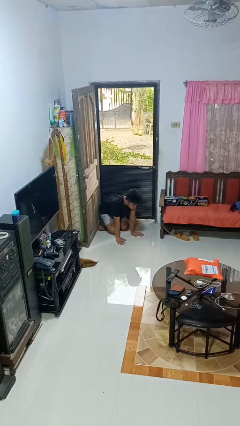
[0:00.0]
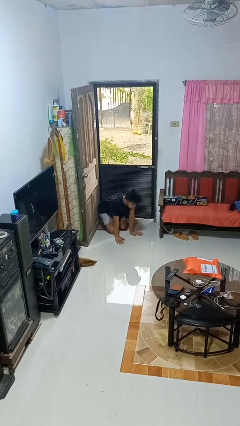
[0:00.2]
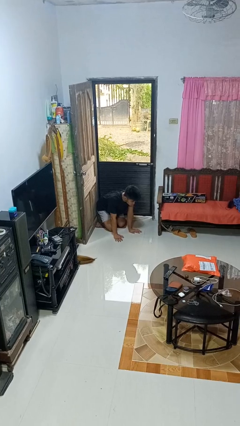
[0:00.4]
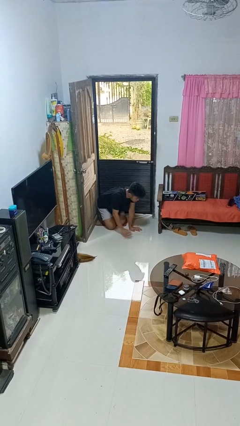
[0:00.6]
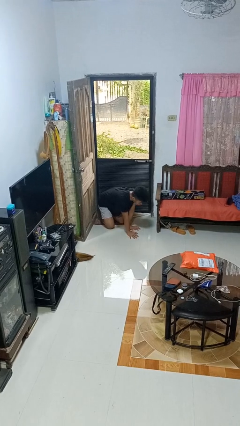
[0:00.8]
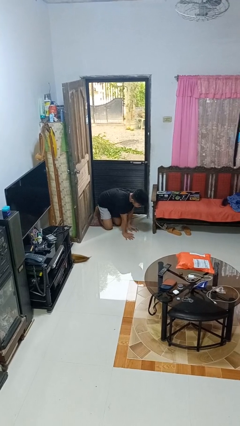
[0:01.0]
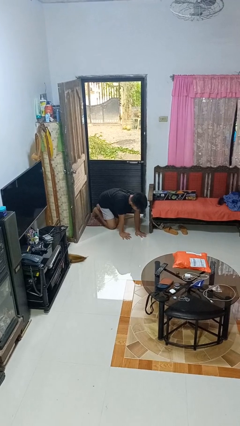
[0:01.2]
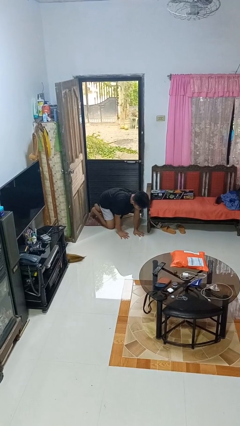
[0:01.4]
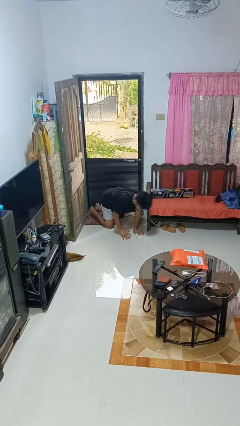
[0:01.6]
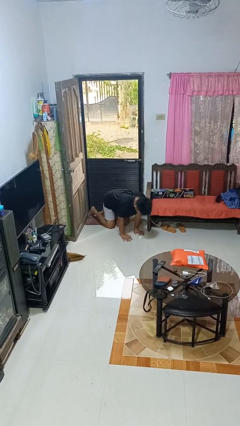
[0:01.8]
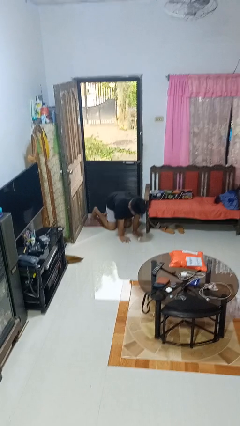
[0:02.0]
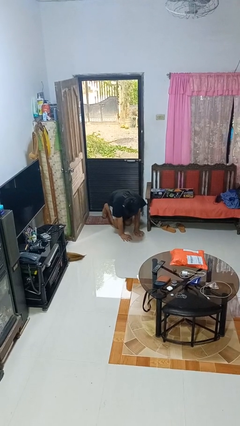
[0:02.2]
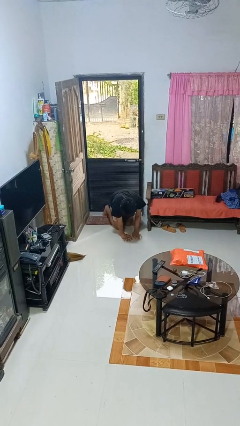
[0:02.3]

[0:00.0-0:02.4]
person crawls

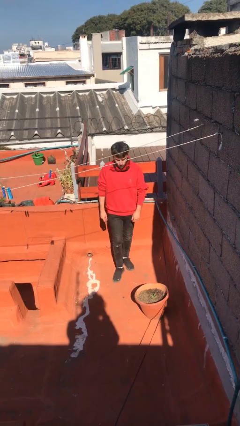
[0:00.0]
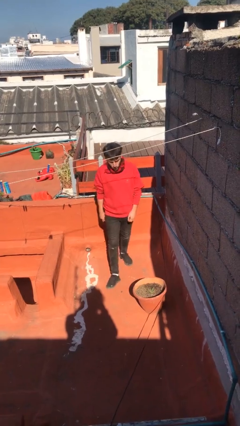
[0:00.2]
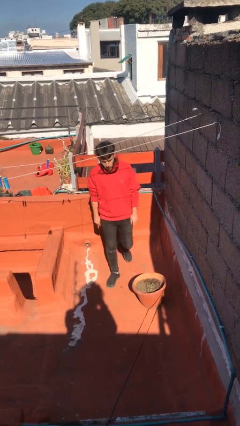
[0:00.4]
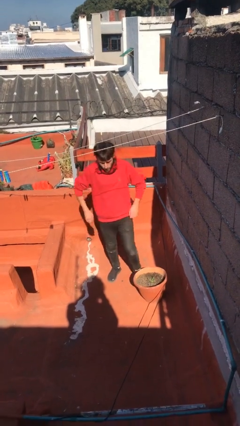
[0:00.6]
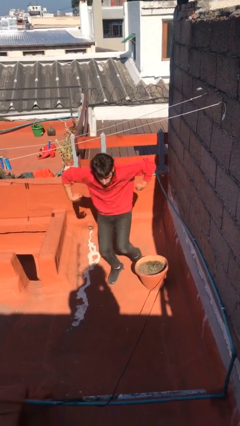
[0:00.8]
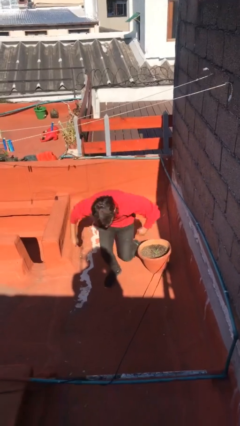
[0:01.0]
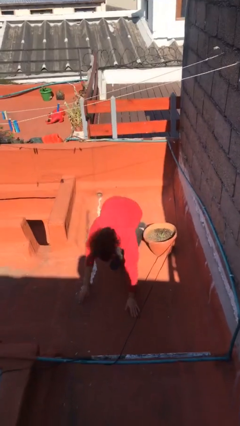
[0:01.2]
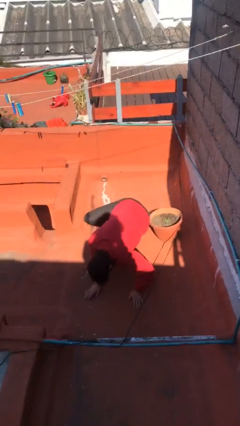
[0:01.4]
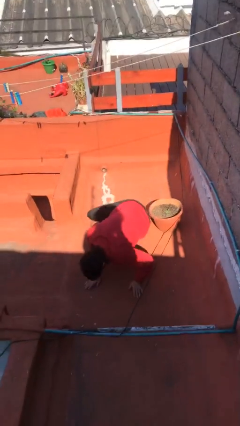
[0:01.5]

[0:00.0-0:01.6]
person trips on object on floor

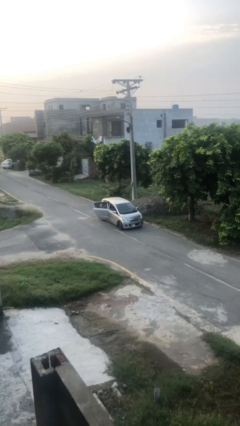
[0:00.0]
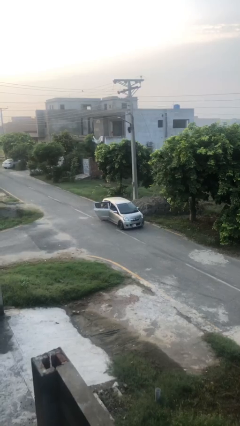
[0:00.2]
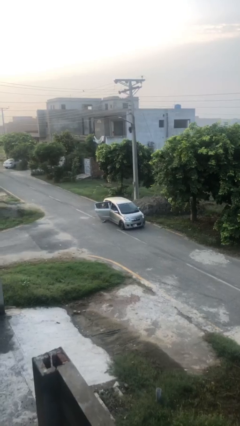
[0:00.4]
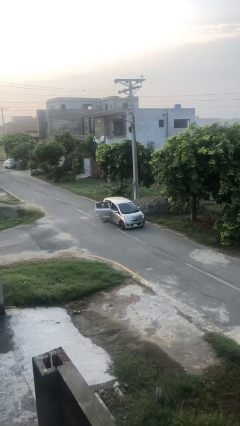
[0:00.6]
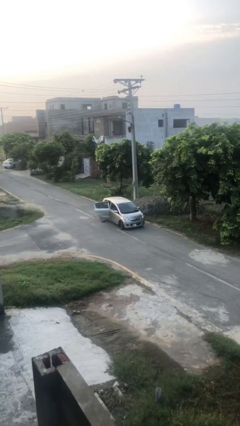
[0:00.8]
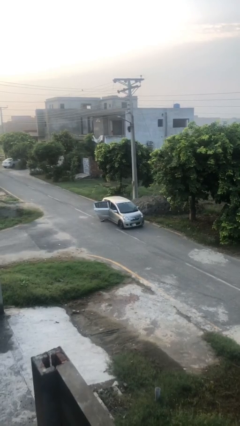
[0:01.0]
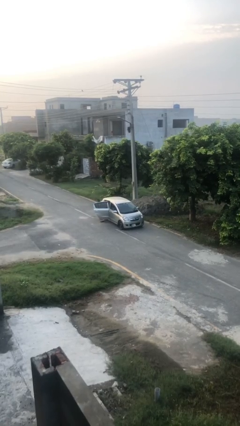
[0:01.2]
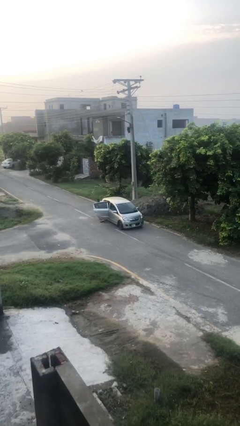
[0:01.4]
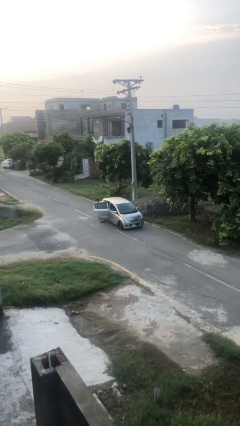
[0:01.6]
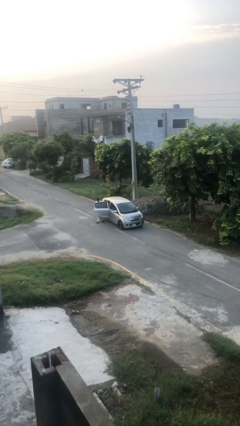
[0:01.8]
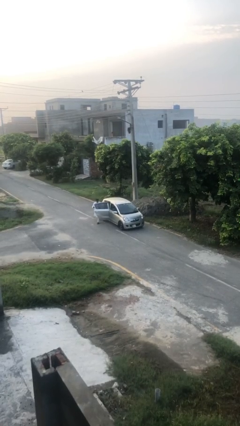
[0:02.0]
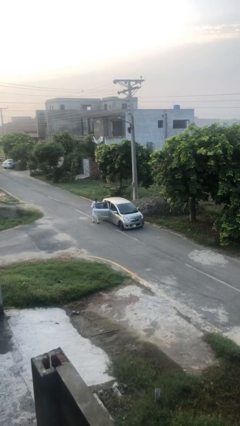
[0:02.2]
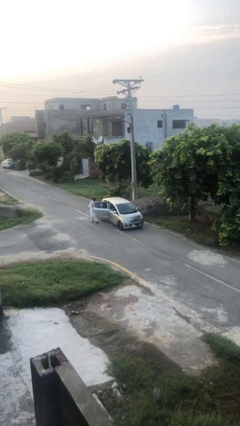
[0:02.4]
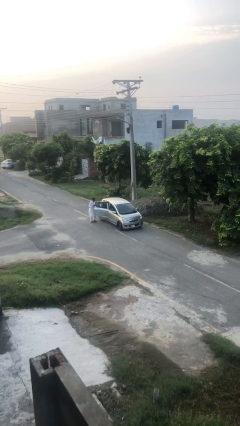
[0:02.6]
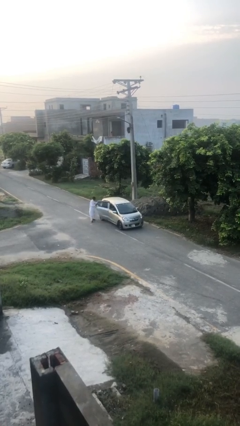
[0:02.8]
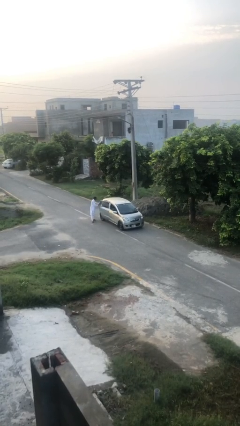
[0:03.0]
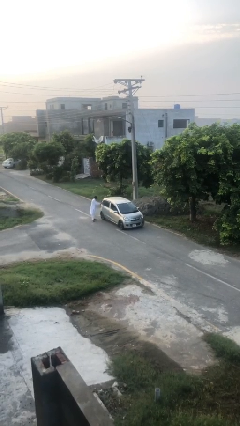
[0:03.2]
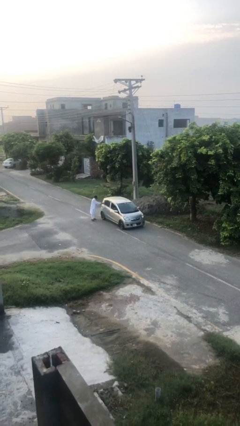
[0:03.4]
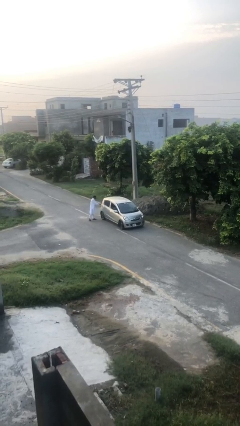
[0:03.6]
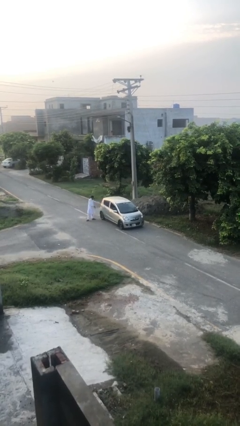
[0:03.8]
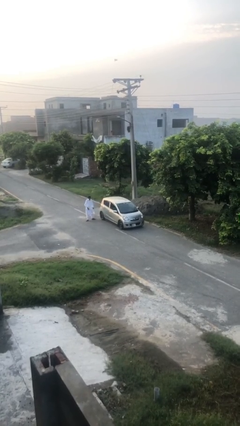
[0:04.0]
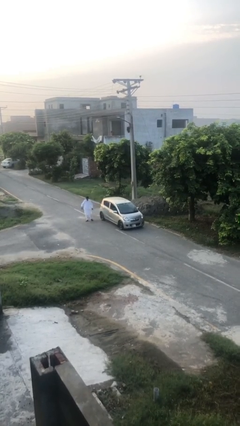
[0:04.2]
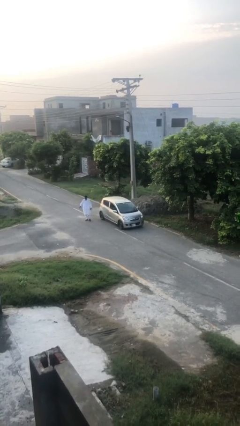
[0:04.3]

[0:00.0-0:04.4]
car drops off person

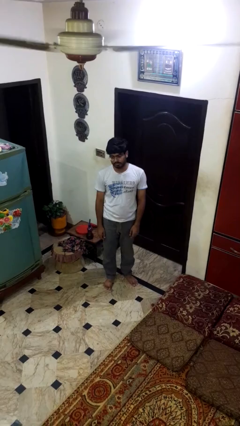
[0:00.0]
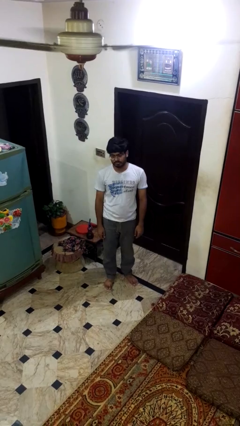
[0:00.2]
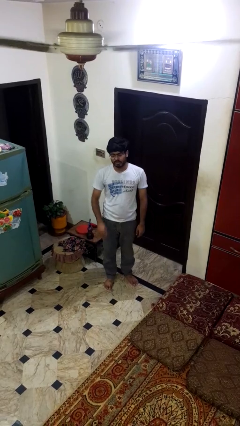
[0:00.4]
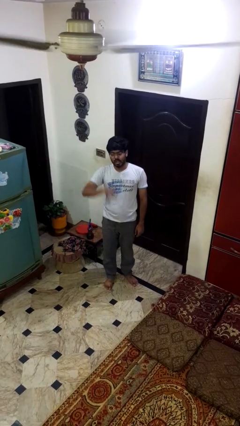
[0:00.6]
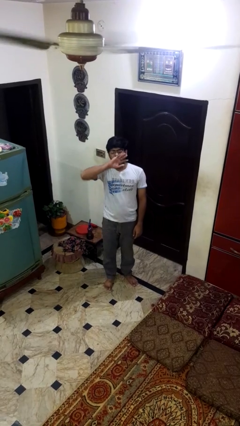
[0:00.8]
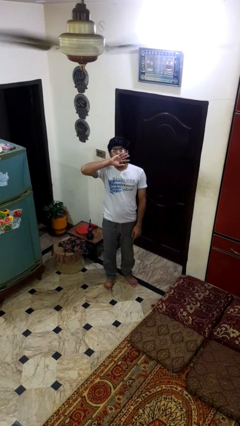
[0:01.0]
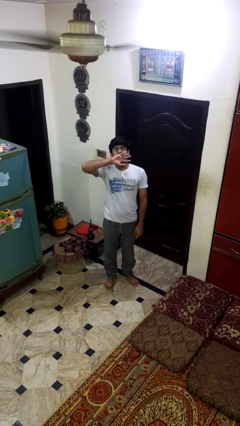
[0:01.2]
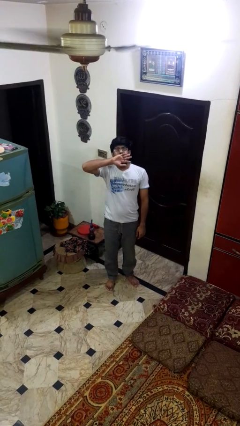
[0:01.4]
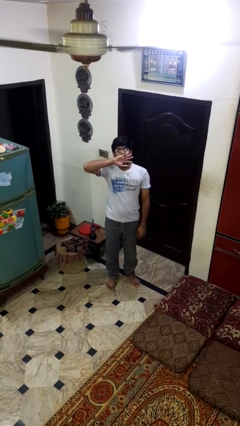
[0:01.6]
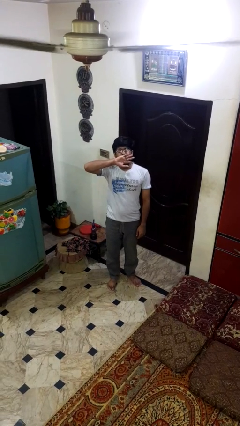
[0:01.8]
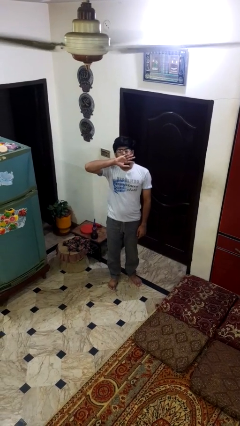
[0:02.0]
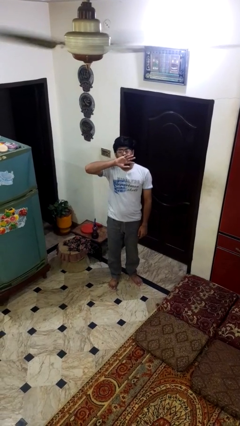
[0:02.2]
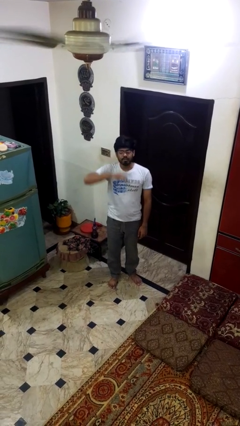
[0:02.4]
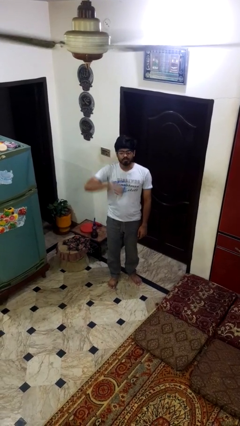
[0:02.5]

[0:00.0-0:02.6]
person yawns

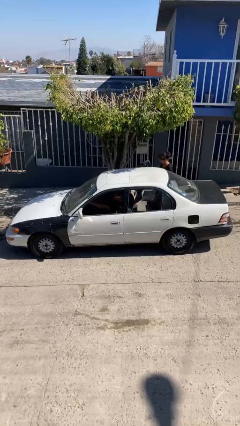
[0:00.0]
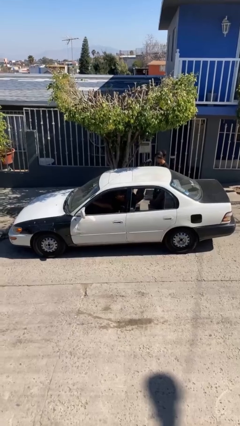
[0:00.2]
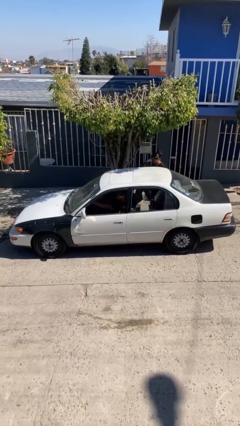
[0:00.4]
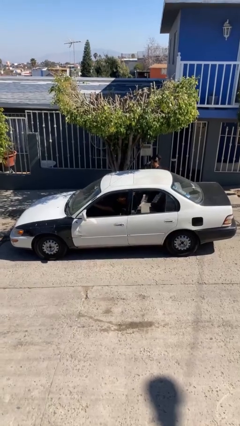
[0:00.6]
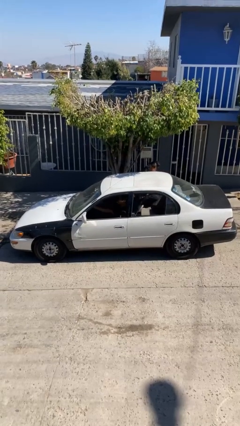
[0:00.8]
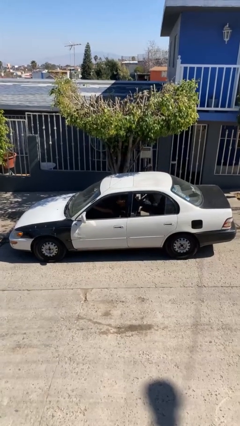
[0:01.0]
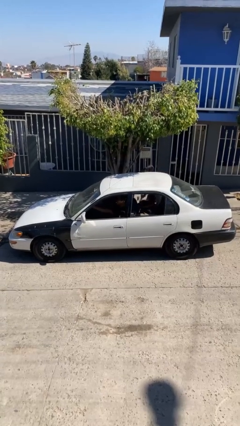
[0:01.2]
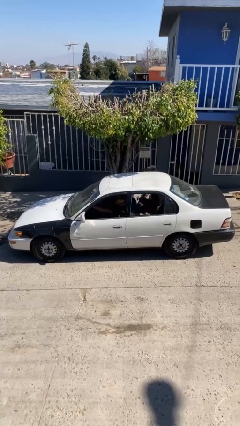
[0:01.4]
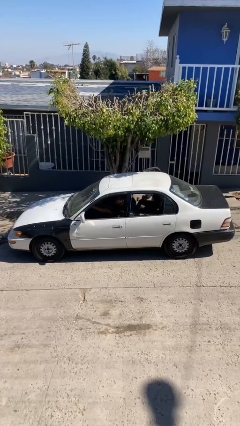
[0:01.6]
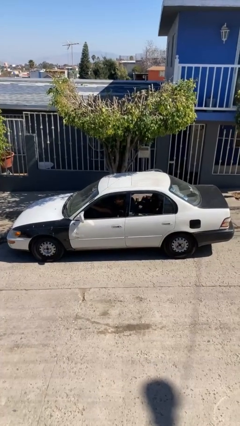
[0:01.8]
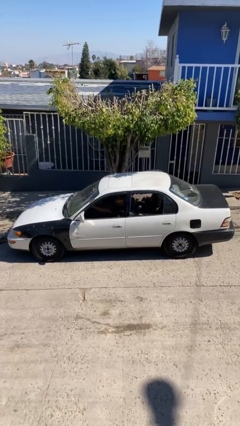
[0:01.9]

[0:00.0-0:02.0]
car picks up person

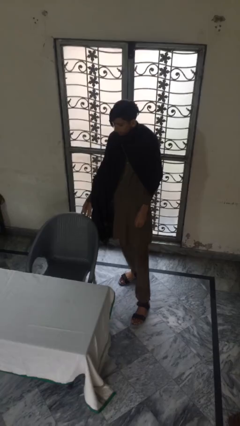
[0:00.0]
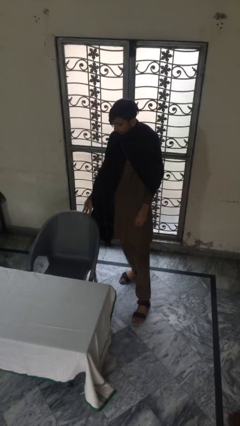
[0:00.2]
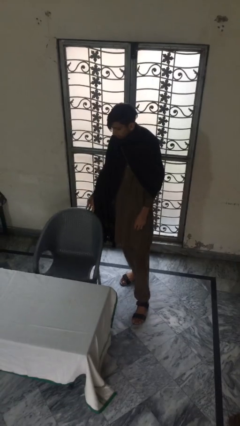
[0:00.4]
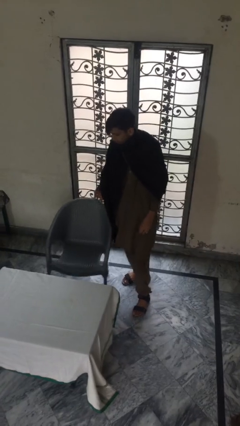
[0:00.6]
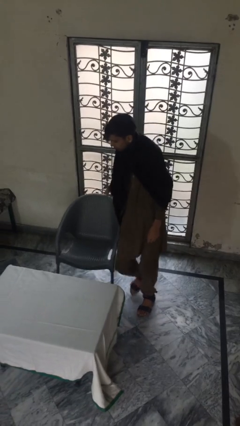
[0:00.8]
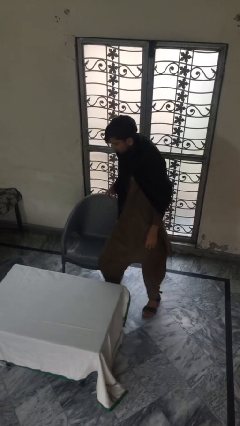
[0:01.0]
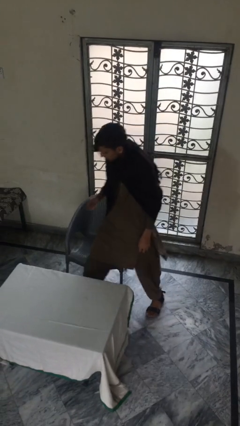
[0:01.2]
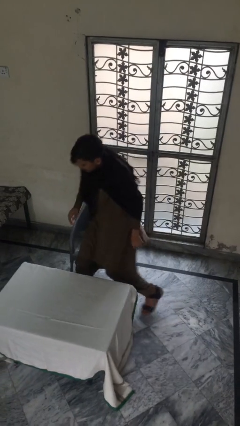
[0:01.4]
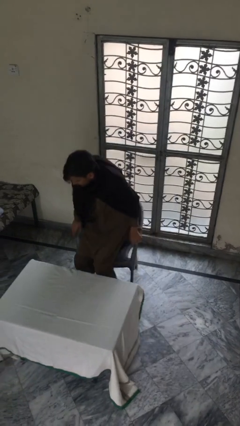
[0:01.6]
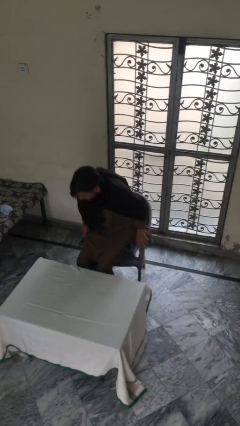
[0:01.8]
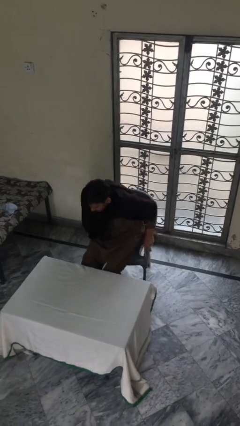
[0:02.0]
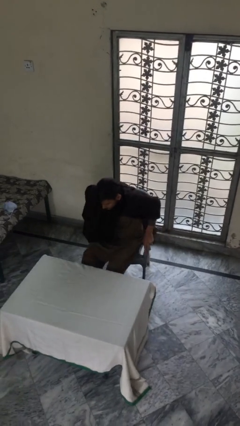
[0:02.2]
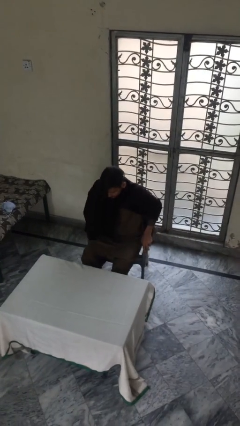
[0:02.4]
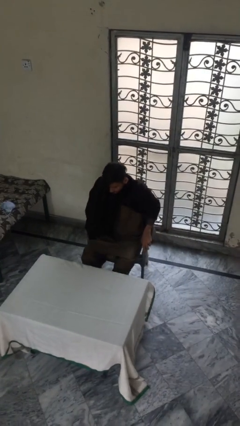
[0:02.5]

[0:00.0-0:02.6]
person sits down

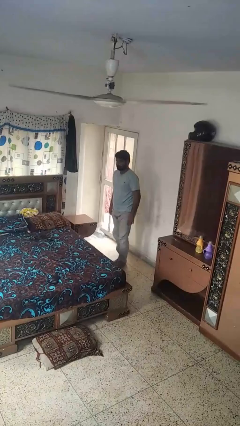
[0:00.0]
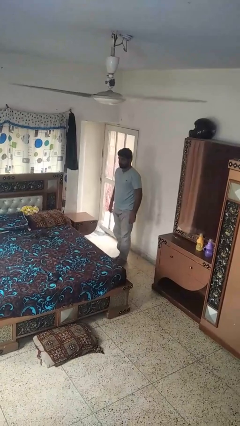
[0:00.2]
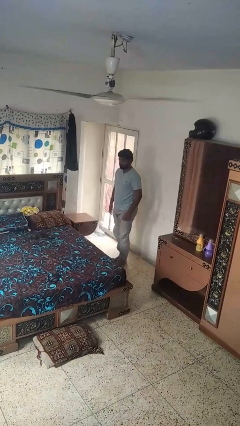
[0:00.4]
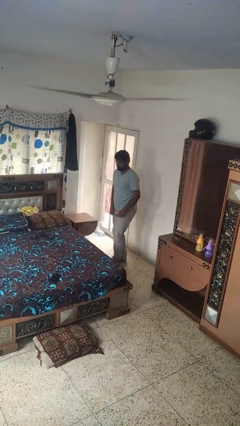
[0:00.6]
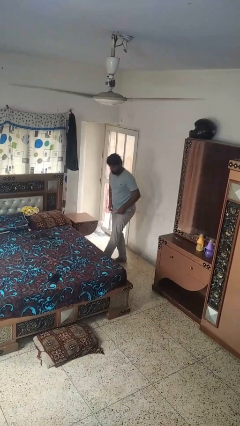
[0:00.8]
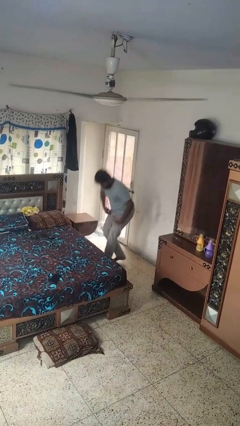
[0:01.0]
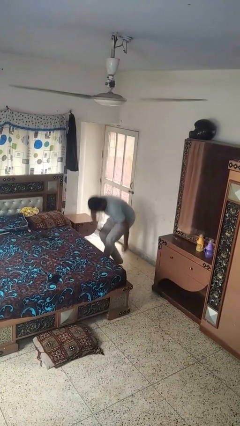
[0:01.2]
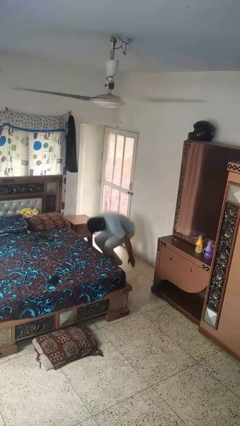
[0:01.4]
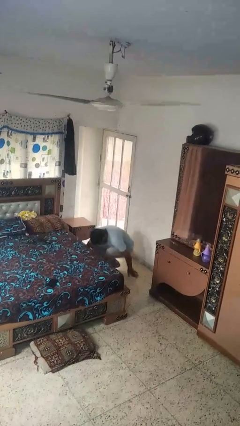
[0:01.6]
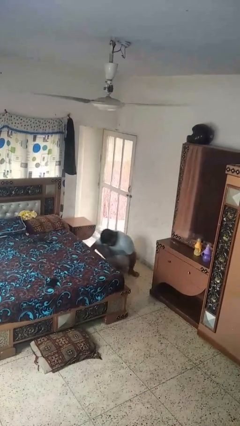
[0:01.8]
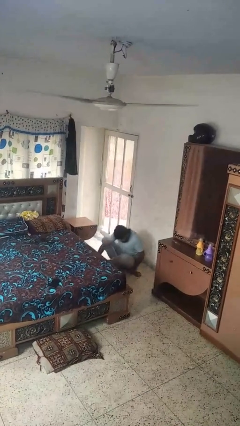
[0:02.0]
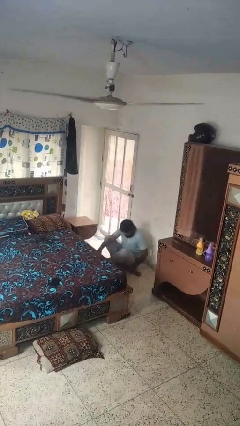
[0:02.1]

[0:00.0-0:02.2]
person sits crisscross
